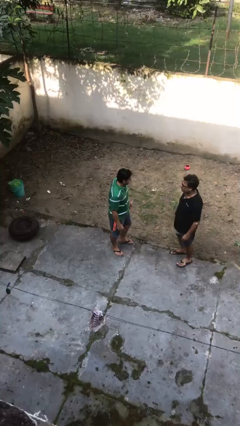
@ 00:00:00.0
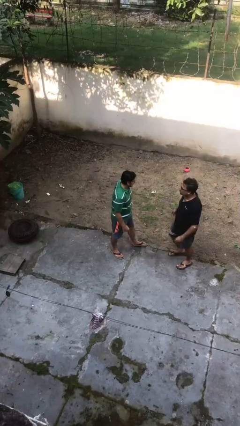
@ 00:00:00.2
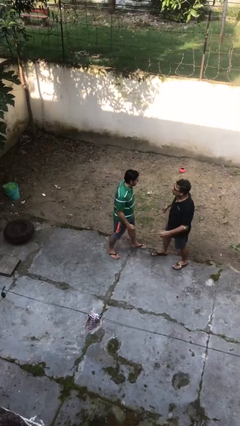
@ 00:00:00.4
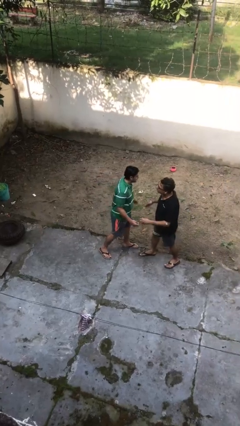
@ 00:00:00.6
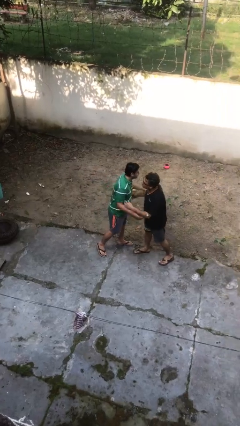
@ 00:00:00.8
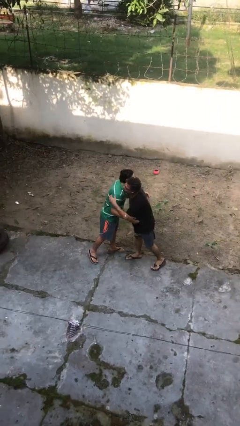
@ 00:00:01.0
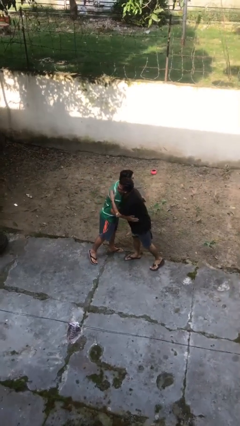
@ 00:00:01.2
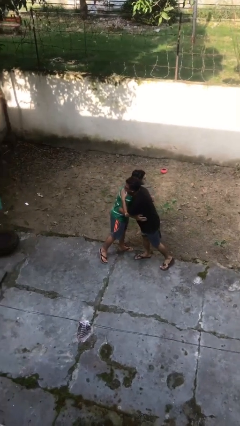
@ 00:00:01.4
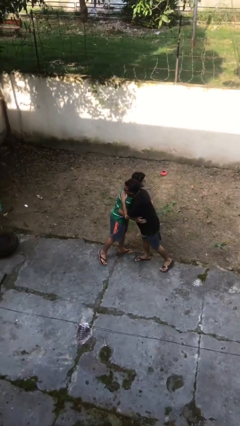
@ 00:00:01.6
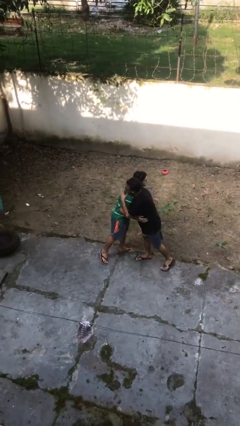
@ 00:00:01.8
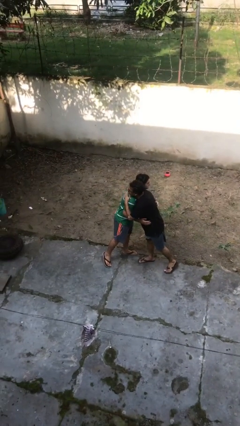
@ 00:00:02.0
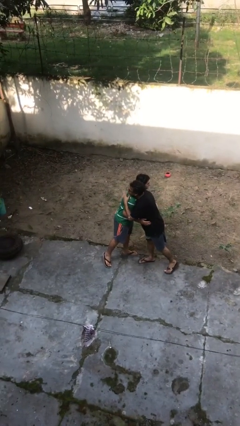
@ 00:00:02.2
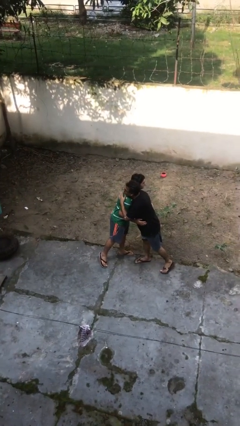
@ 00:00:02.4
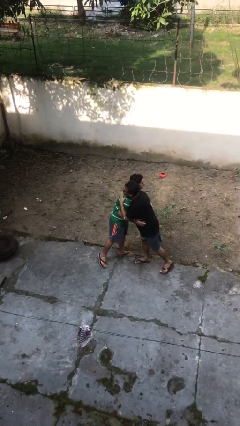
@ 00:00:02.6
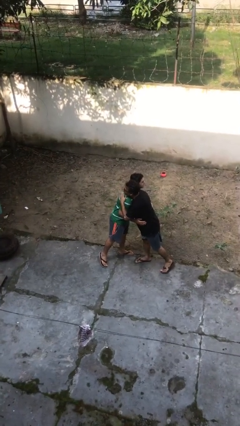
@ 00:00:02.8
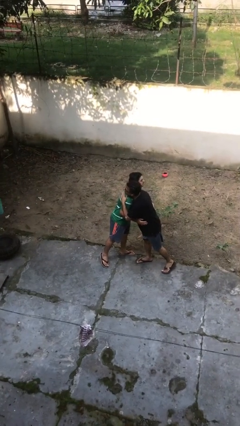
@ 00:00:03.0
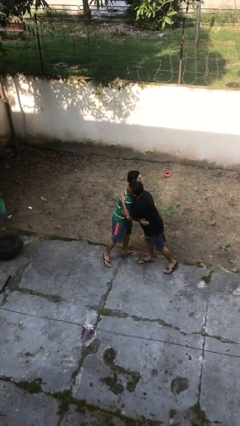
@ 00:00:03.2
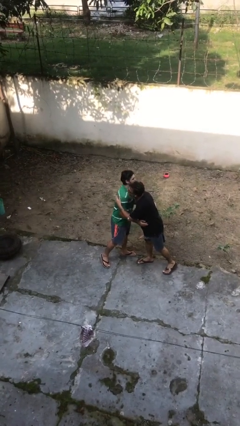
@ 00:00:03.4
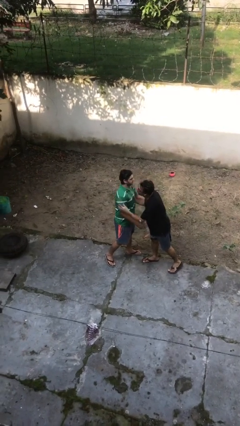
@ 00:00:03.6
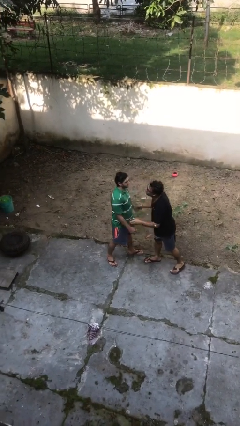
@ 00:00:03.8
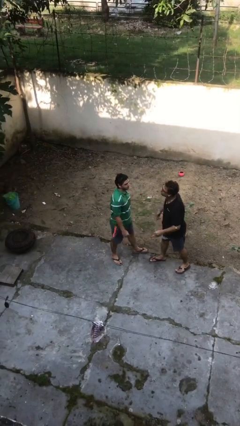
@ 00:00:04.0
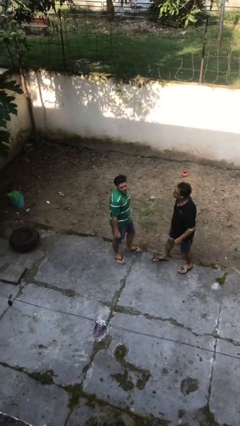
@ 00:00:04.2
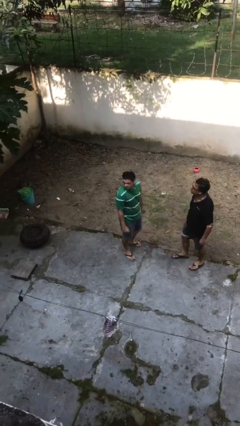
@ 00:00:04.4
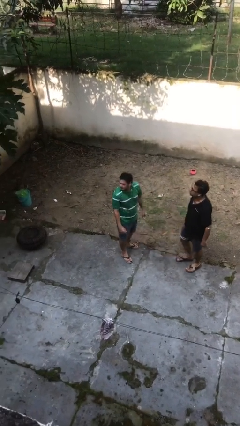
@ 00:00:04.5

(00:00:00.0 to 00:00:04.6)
person embraces person

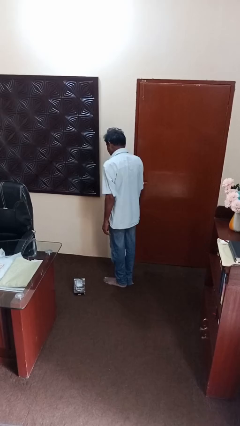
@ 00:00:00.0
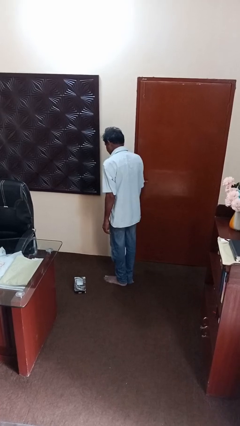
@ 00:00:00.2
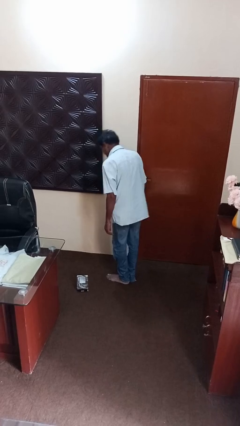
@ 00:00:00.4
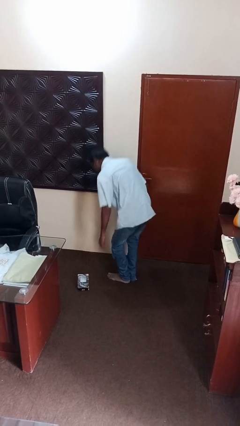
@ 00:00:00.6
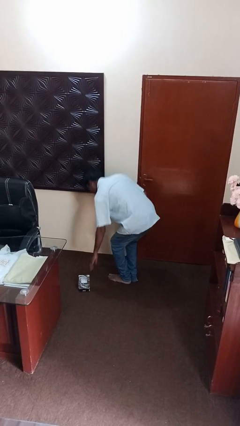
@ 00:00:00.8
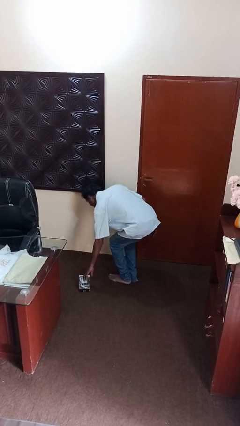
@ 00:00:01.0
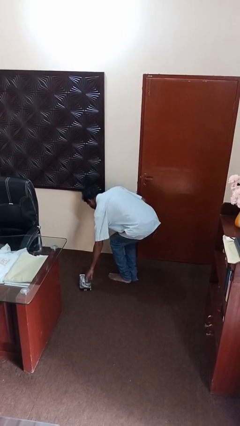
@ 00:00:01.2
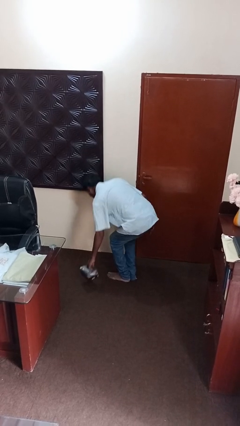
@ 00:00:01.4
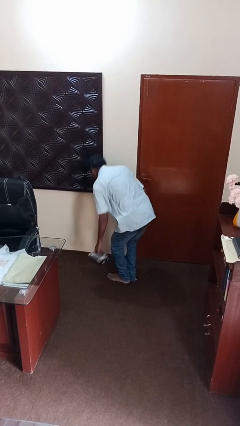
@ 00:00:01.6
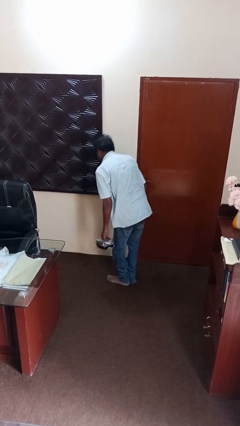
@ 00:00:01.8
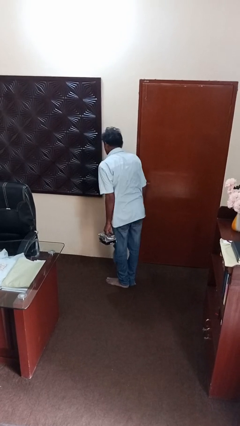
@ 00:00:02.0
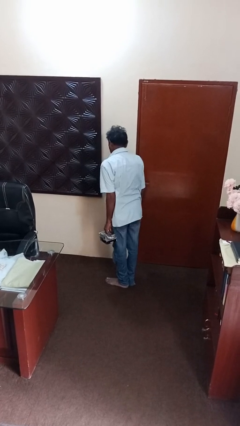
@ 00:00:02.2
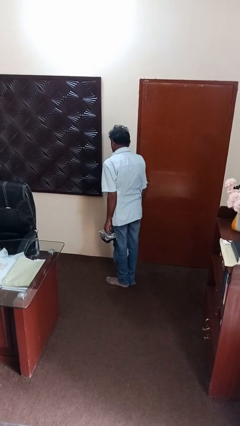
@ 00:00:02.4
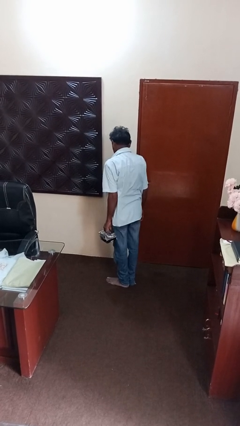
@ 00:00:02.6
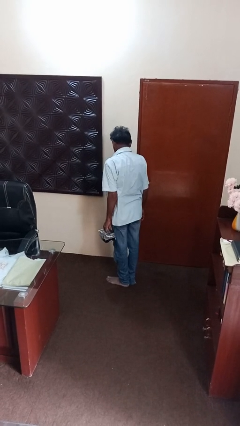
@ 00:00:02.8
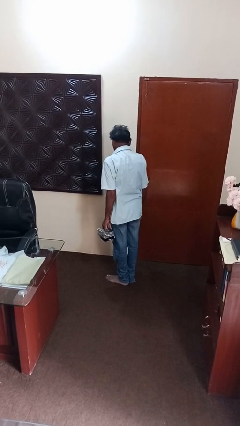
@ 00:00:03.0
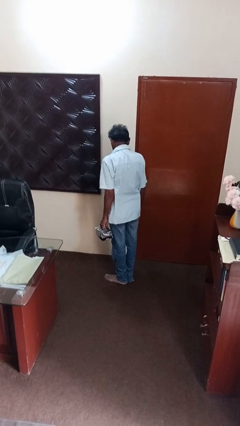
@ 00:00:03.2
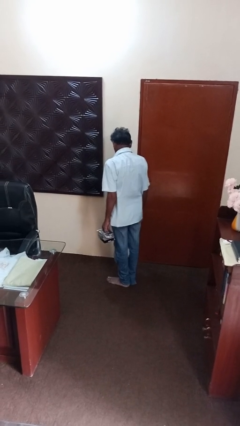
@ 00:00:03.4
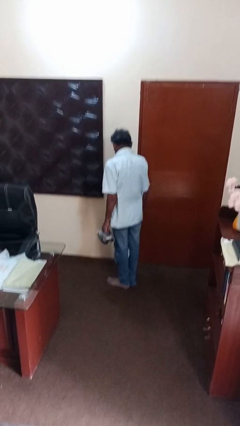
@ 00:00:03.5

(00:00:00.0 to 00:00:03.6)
person picks up object from floor

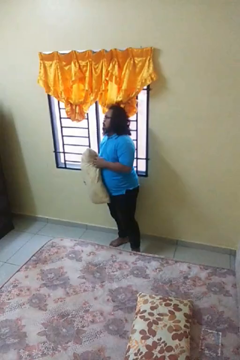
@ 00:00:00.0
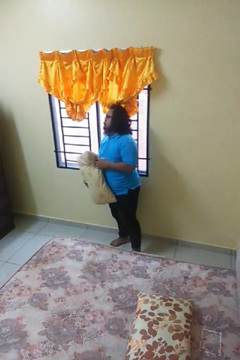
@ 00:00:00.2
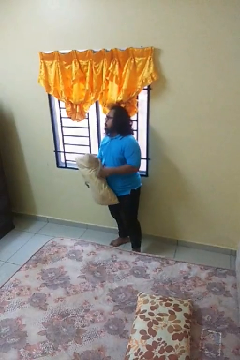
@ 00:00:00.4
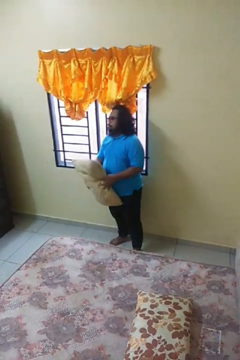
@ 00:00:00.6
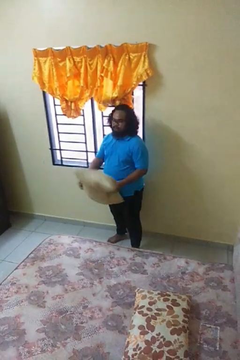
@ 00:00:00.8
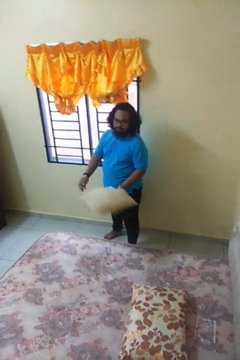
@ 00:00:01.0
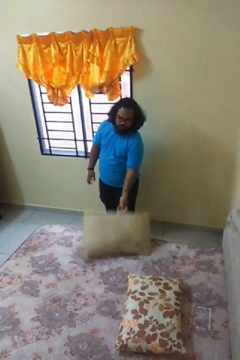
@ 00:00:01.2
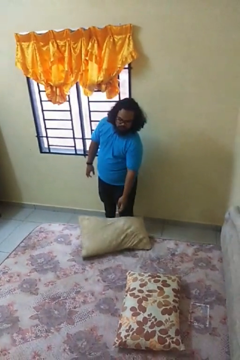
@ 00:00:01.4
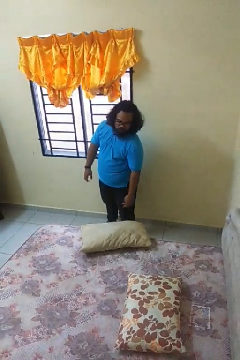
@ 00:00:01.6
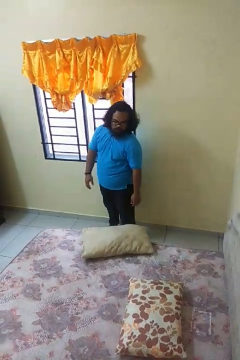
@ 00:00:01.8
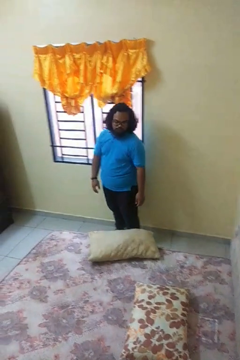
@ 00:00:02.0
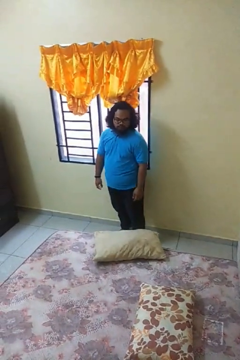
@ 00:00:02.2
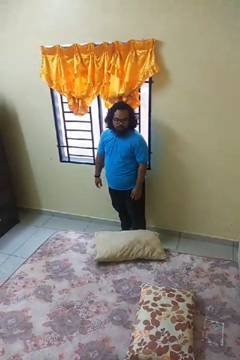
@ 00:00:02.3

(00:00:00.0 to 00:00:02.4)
person puts down object on bed

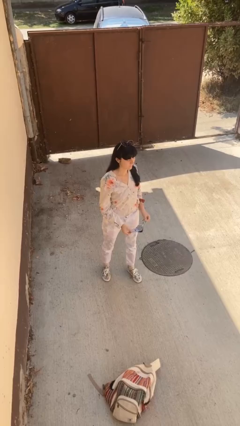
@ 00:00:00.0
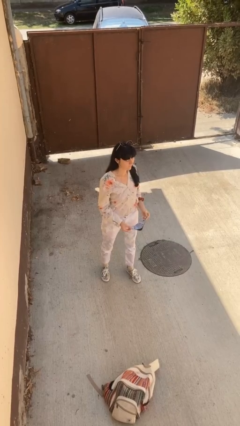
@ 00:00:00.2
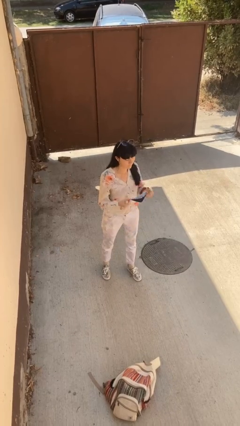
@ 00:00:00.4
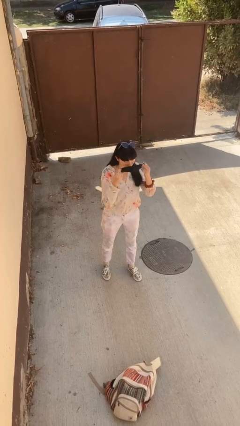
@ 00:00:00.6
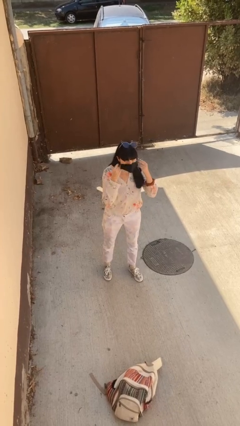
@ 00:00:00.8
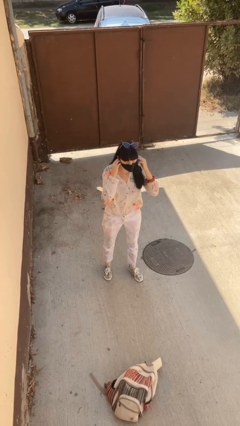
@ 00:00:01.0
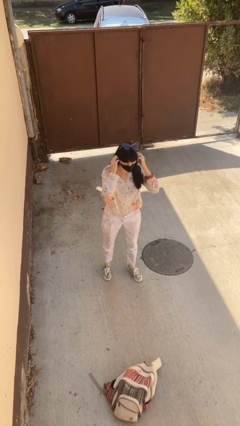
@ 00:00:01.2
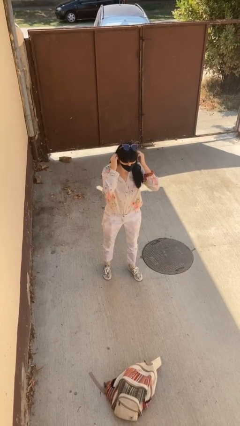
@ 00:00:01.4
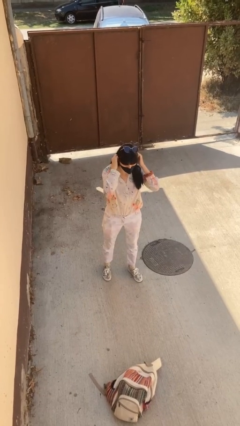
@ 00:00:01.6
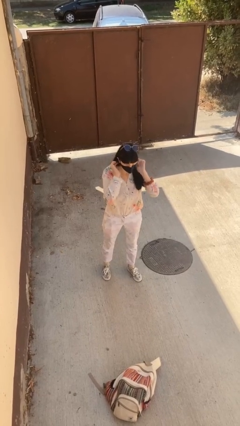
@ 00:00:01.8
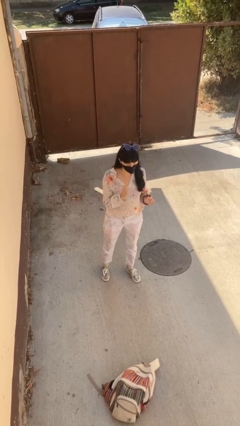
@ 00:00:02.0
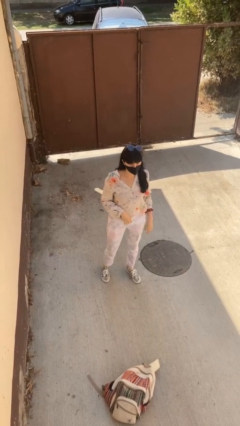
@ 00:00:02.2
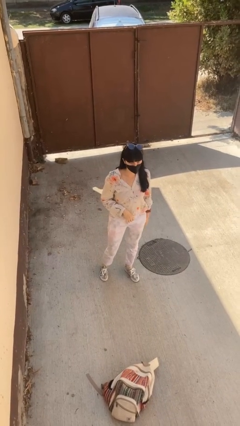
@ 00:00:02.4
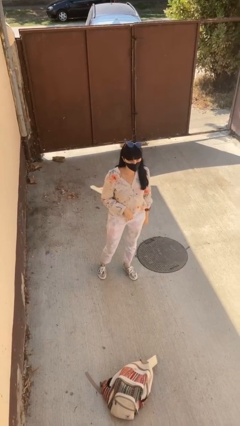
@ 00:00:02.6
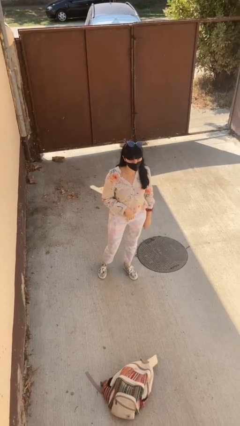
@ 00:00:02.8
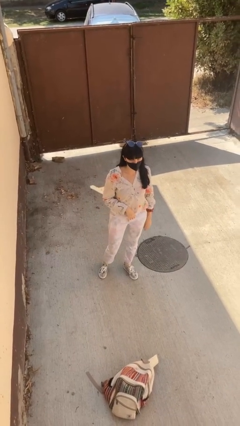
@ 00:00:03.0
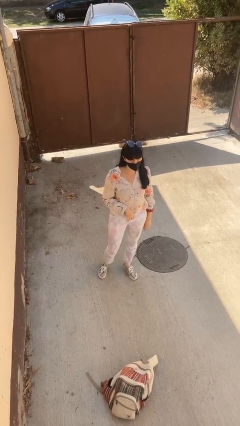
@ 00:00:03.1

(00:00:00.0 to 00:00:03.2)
person puts on facemask

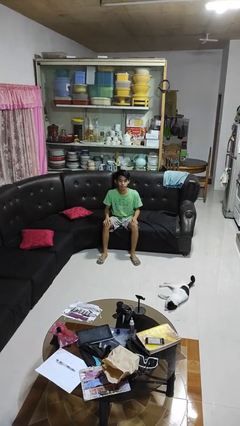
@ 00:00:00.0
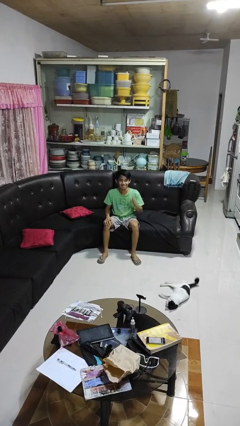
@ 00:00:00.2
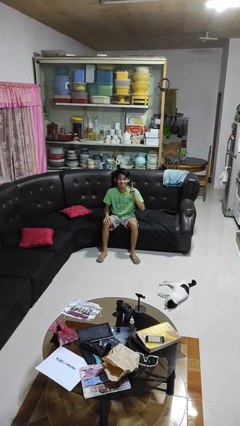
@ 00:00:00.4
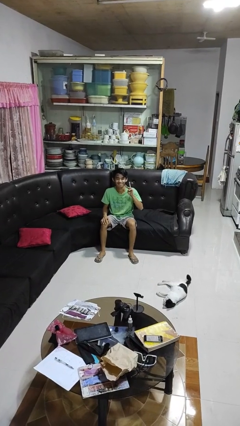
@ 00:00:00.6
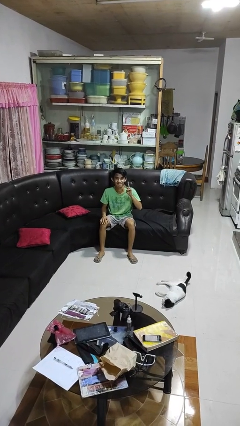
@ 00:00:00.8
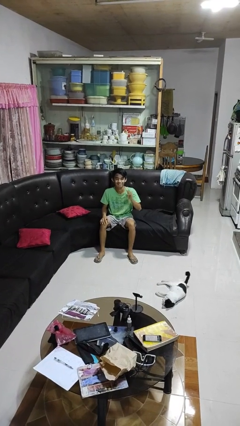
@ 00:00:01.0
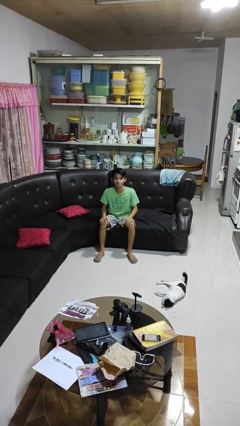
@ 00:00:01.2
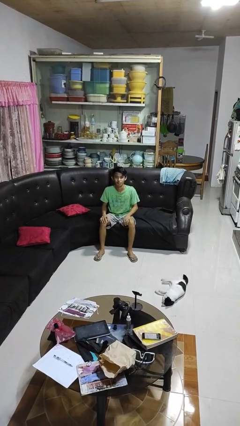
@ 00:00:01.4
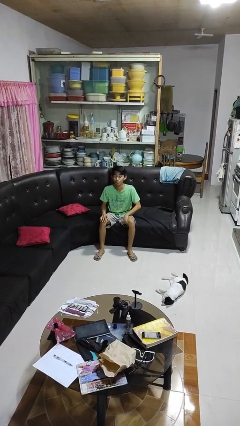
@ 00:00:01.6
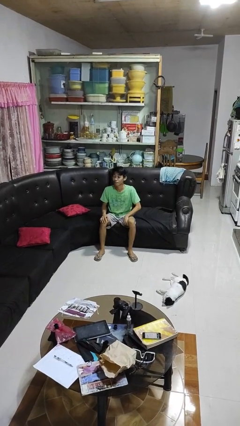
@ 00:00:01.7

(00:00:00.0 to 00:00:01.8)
person gestures peace

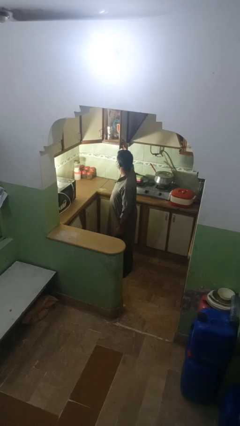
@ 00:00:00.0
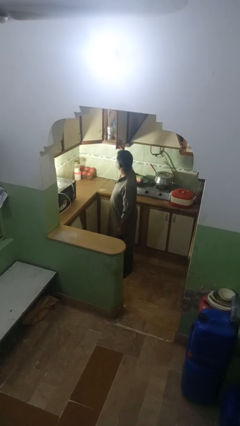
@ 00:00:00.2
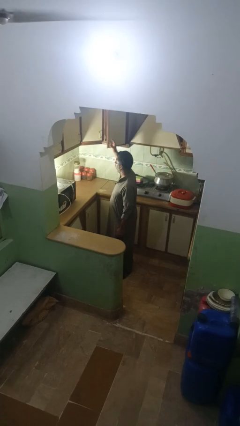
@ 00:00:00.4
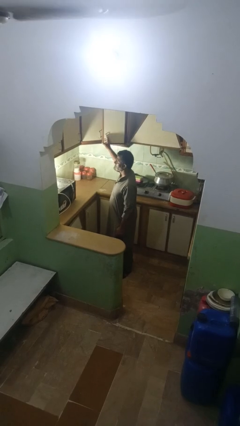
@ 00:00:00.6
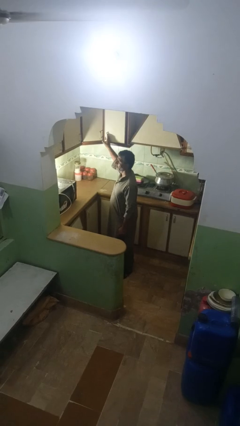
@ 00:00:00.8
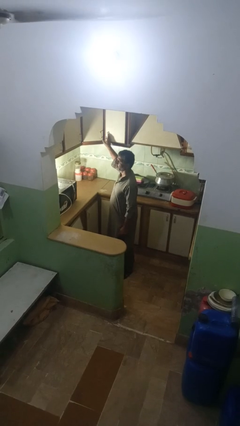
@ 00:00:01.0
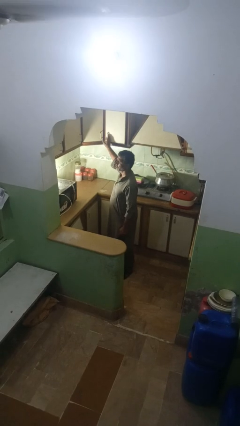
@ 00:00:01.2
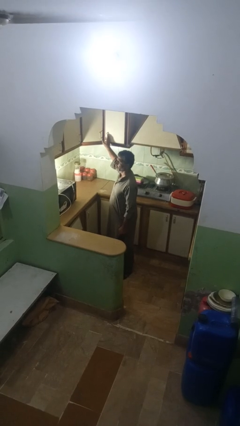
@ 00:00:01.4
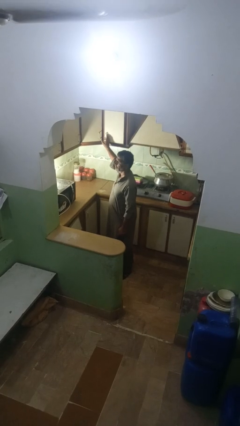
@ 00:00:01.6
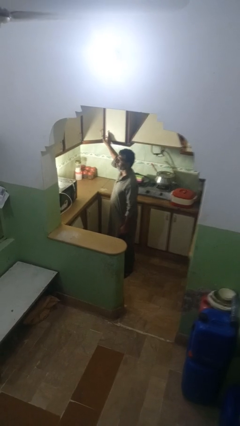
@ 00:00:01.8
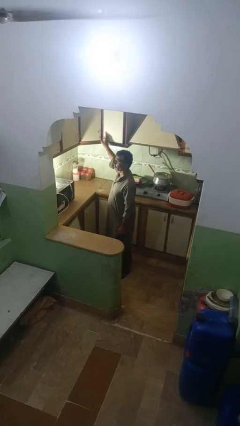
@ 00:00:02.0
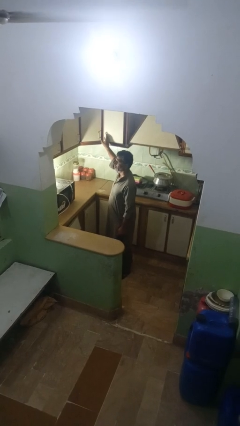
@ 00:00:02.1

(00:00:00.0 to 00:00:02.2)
person closes kitchen drawer
